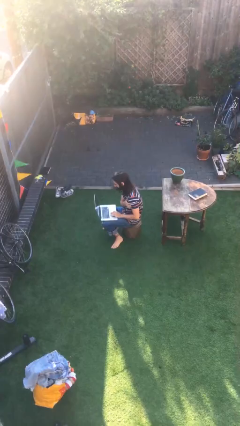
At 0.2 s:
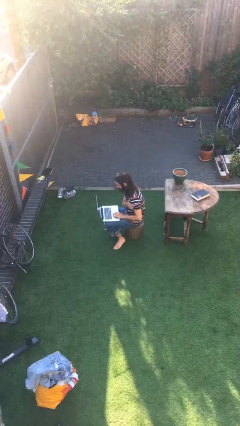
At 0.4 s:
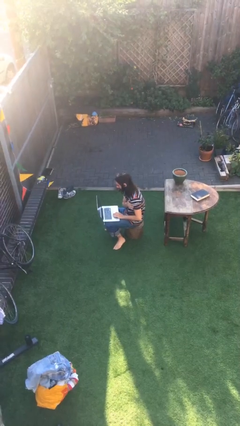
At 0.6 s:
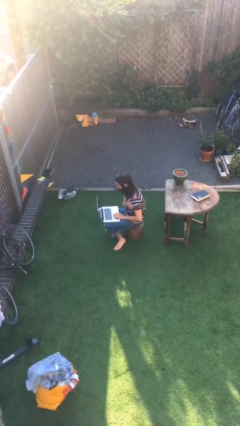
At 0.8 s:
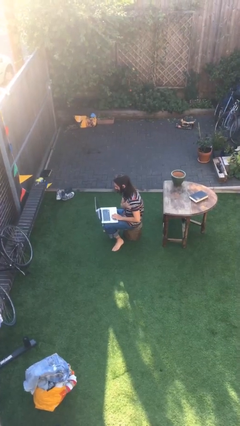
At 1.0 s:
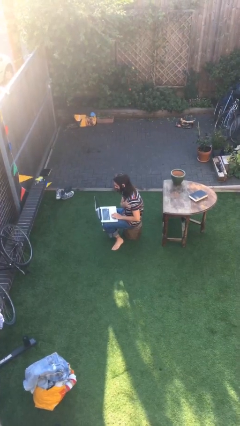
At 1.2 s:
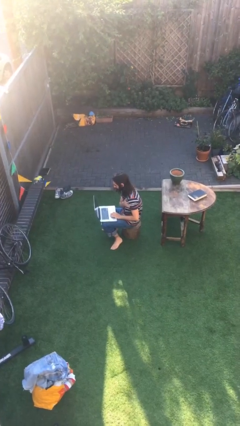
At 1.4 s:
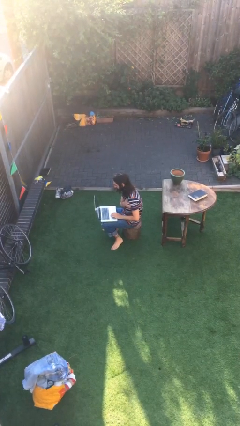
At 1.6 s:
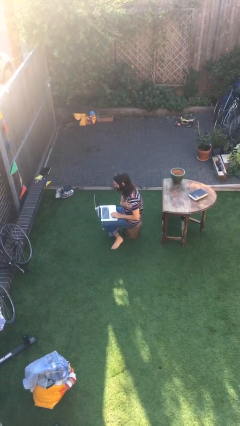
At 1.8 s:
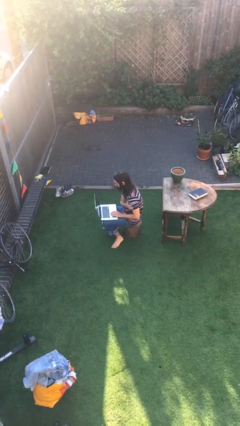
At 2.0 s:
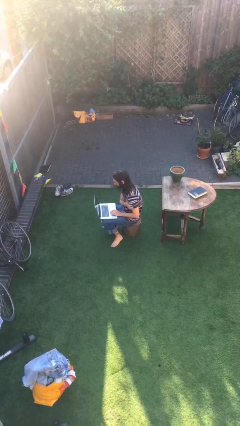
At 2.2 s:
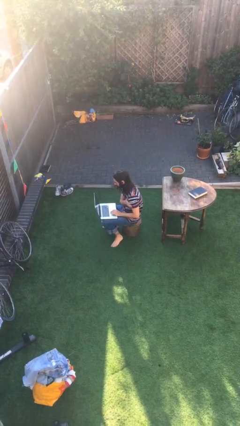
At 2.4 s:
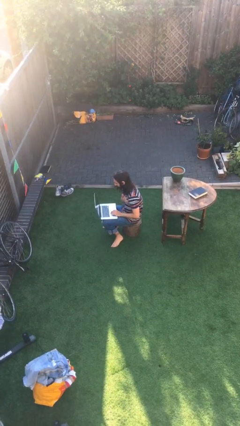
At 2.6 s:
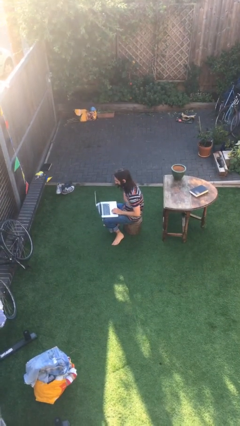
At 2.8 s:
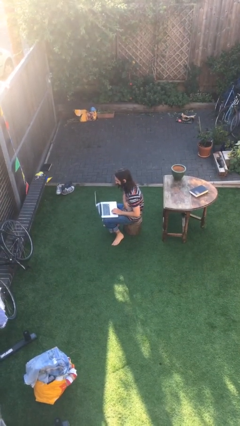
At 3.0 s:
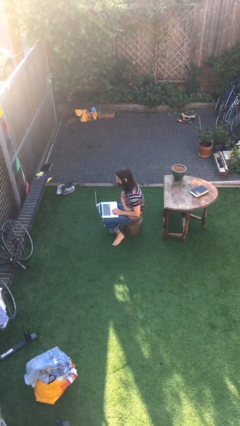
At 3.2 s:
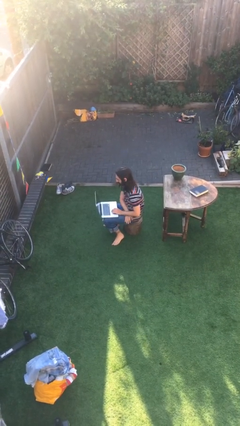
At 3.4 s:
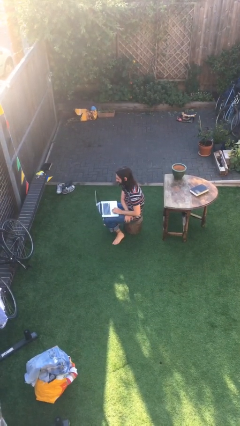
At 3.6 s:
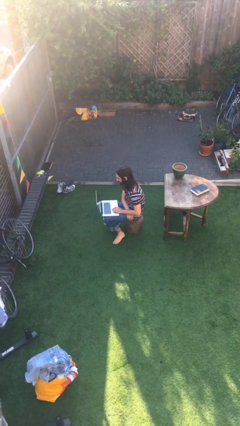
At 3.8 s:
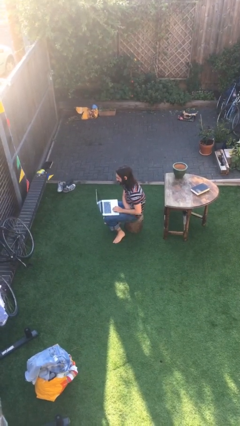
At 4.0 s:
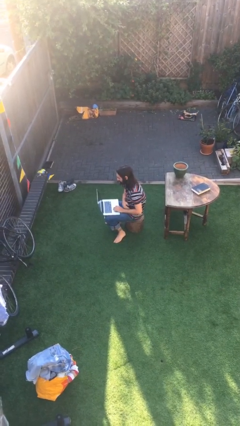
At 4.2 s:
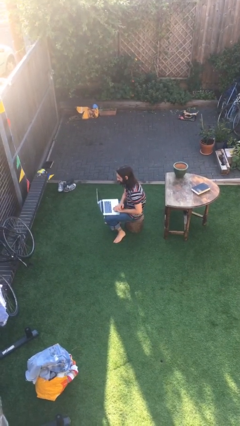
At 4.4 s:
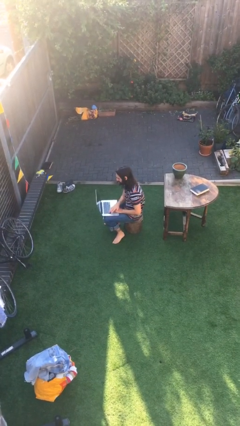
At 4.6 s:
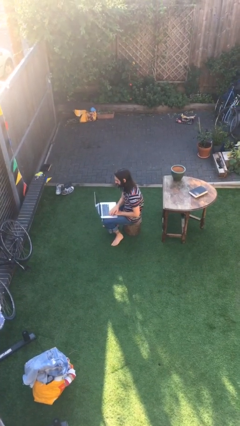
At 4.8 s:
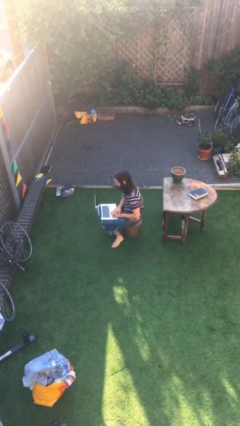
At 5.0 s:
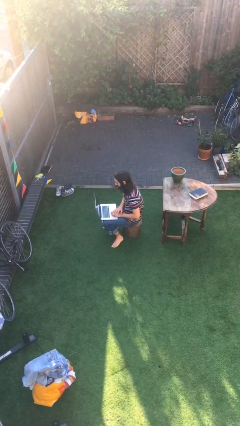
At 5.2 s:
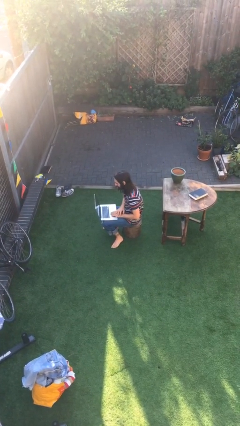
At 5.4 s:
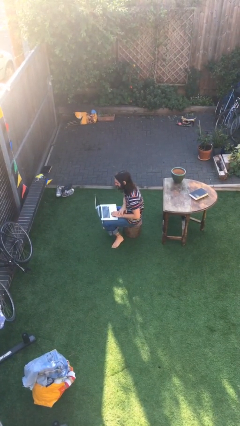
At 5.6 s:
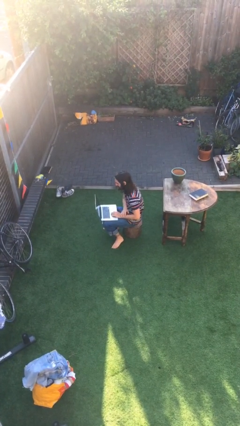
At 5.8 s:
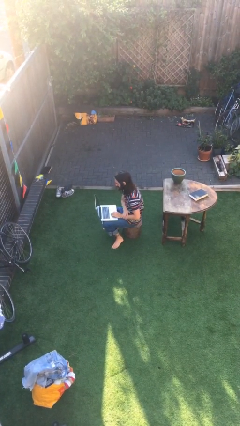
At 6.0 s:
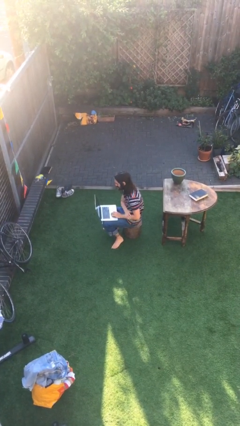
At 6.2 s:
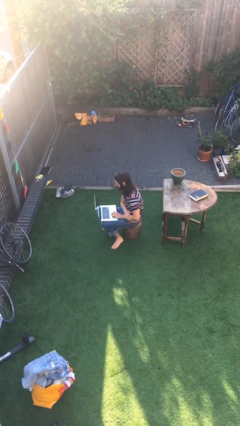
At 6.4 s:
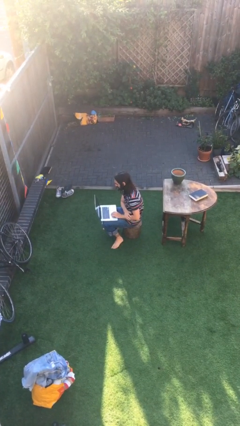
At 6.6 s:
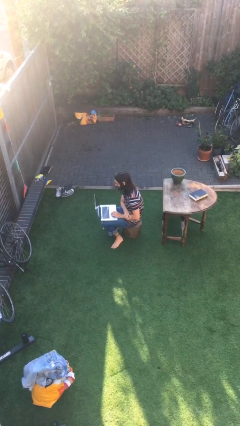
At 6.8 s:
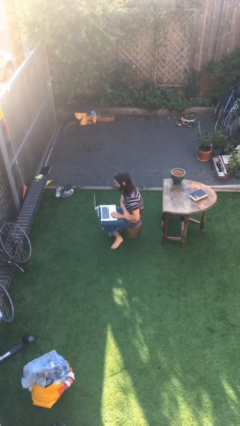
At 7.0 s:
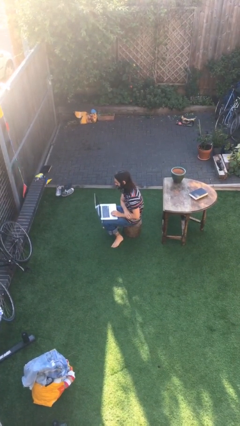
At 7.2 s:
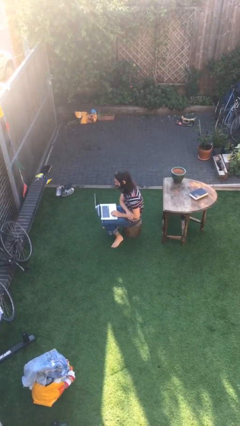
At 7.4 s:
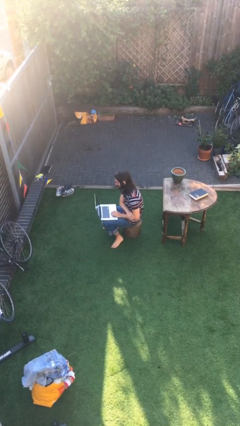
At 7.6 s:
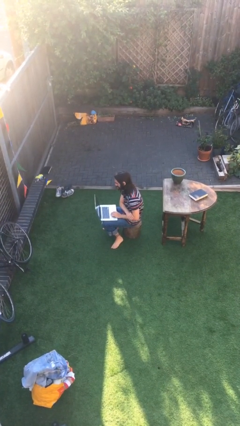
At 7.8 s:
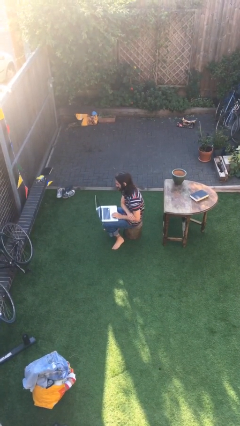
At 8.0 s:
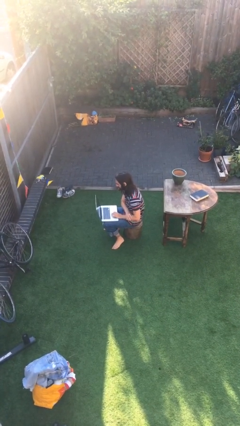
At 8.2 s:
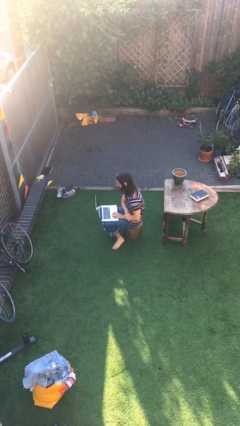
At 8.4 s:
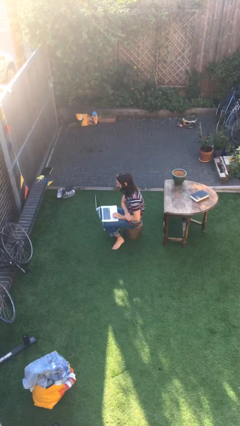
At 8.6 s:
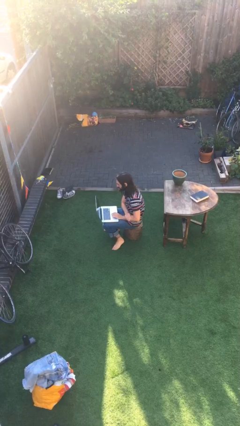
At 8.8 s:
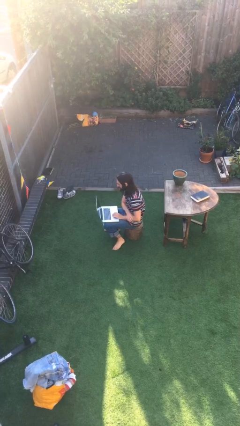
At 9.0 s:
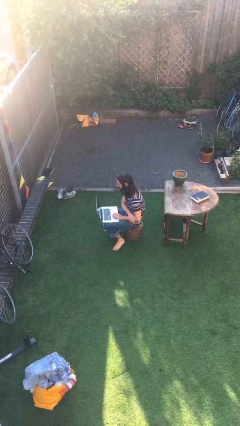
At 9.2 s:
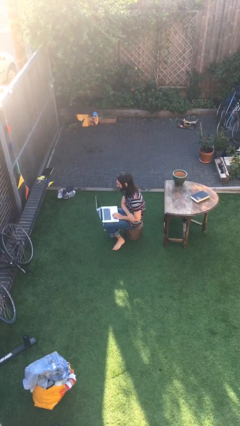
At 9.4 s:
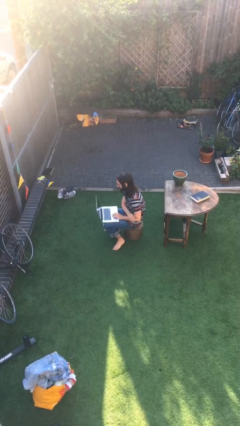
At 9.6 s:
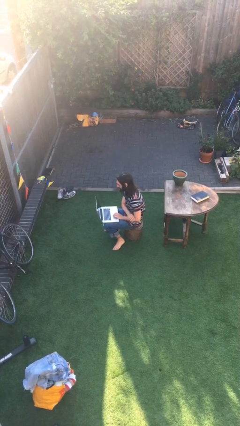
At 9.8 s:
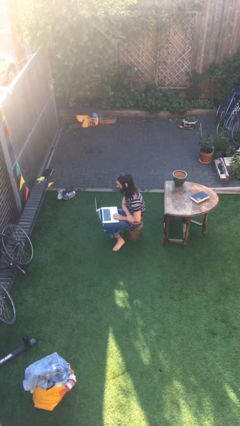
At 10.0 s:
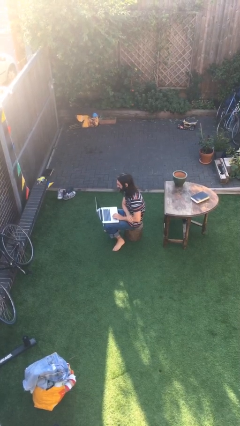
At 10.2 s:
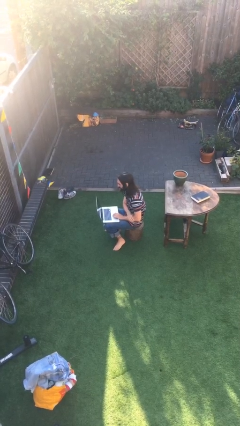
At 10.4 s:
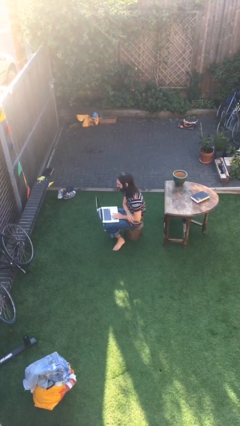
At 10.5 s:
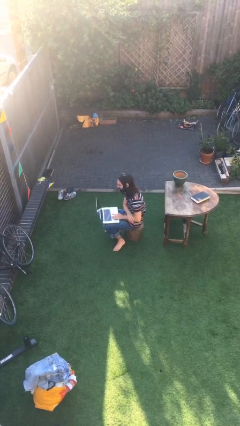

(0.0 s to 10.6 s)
person interacts with laptop

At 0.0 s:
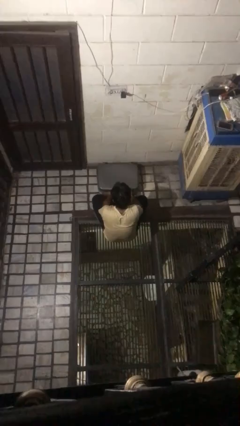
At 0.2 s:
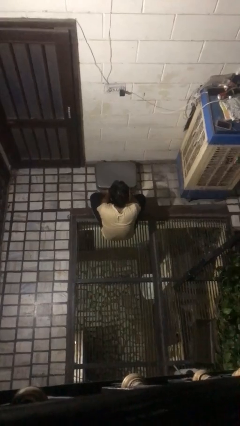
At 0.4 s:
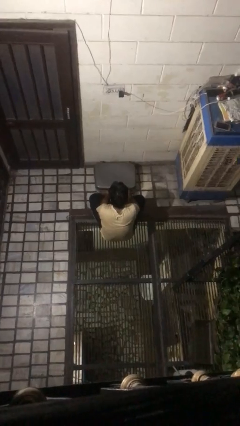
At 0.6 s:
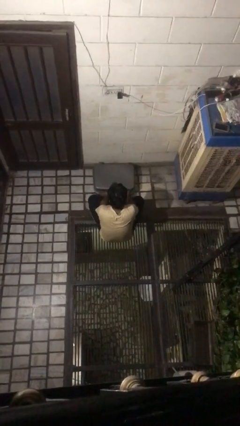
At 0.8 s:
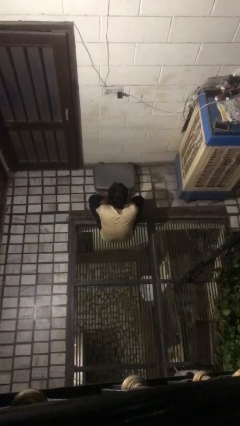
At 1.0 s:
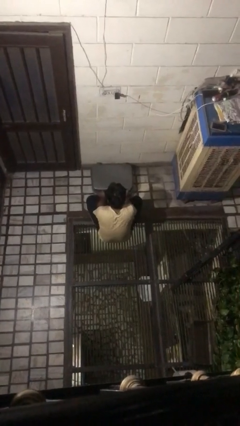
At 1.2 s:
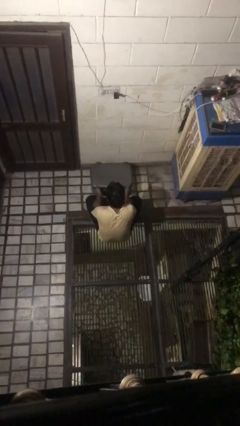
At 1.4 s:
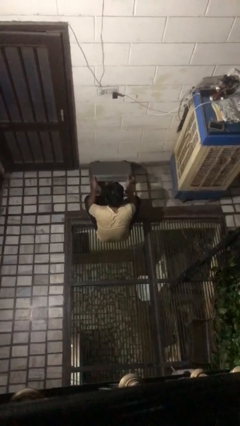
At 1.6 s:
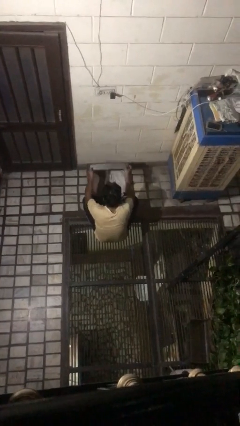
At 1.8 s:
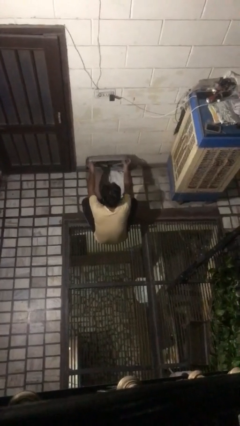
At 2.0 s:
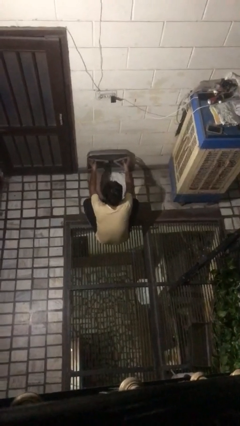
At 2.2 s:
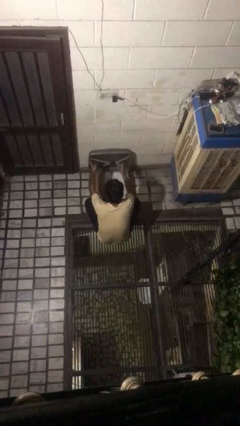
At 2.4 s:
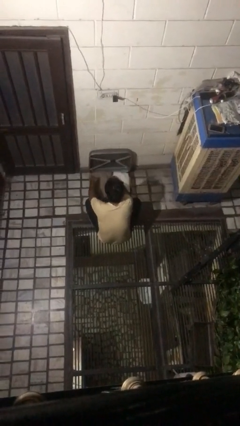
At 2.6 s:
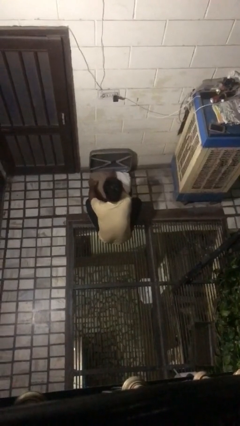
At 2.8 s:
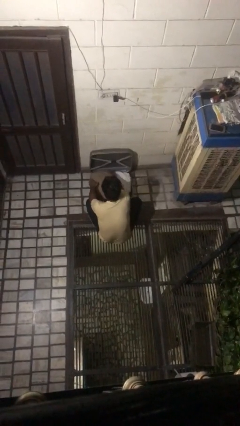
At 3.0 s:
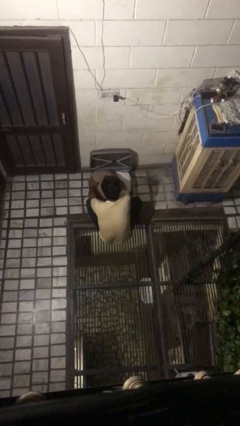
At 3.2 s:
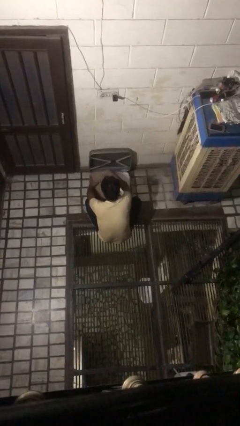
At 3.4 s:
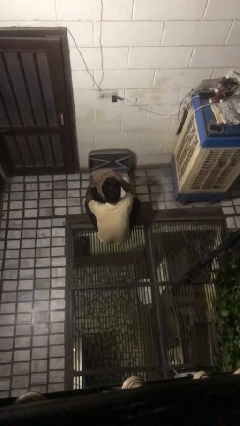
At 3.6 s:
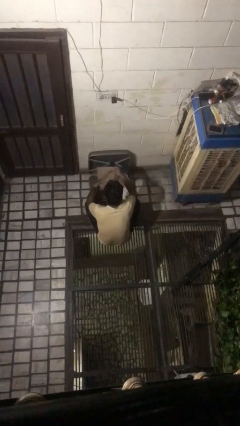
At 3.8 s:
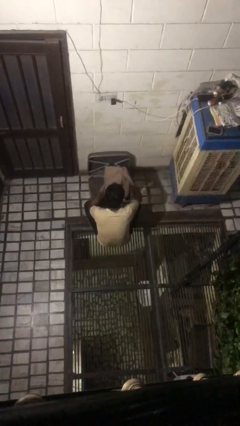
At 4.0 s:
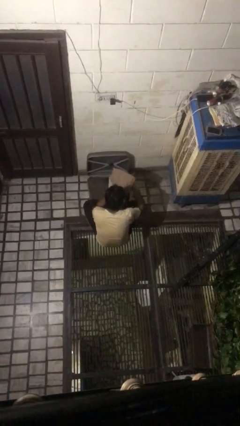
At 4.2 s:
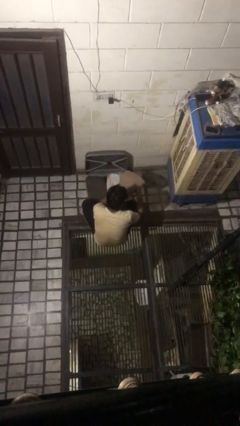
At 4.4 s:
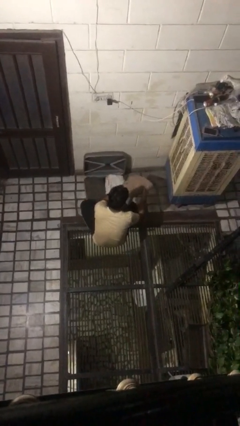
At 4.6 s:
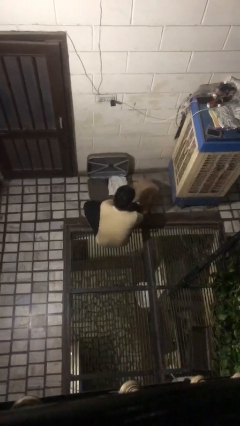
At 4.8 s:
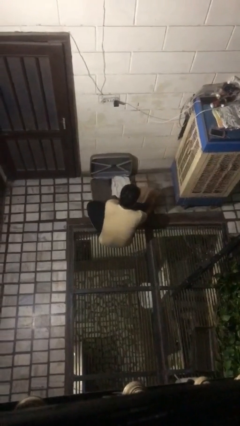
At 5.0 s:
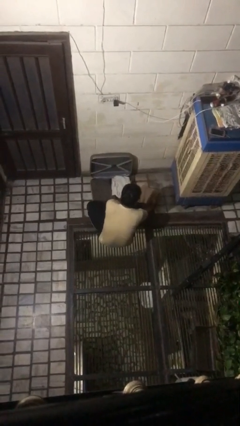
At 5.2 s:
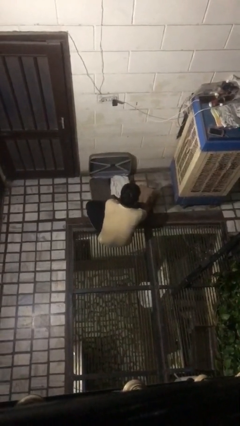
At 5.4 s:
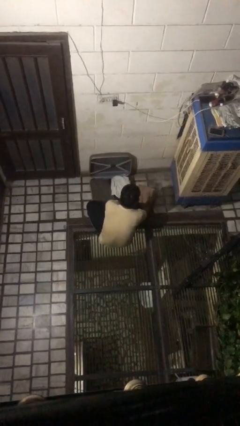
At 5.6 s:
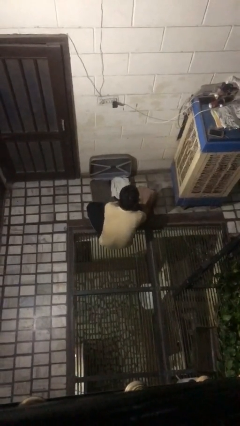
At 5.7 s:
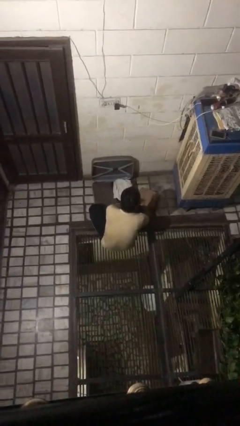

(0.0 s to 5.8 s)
person unloads clothes from suitcase

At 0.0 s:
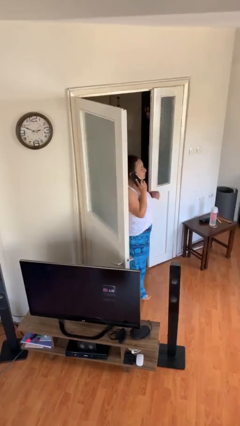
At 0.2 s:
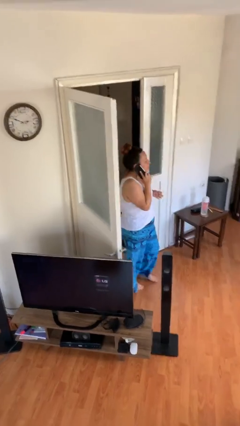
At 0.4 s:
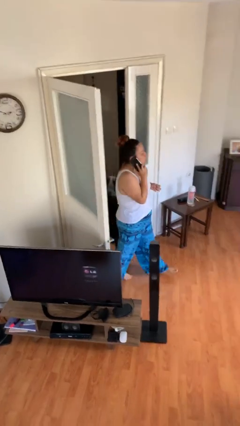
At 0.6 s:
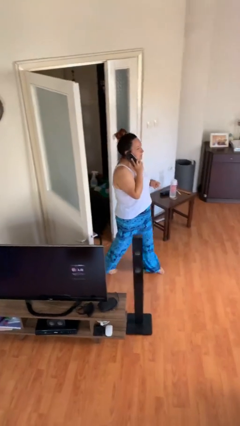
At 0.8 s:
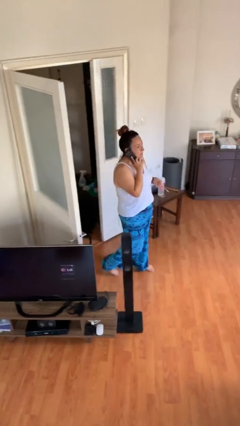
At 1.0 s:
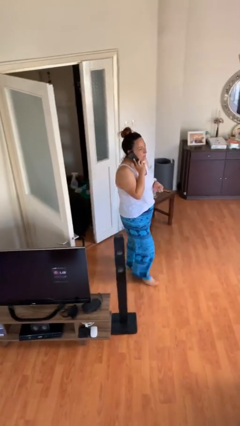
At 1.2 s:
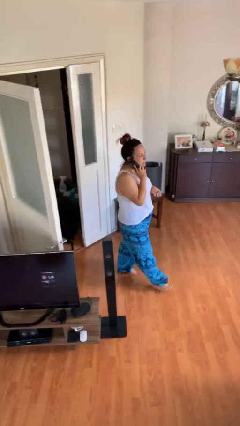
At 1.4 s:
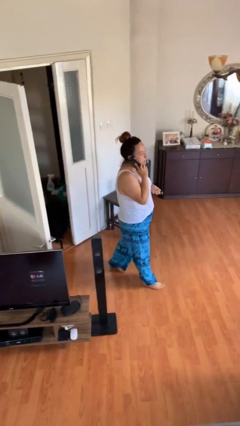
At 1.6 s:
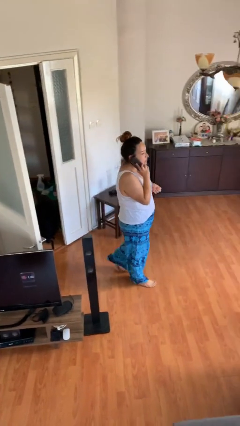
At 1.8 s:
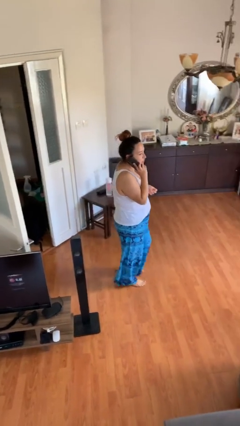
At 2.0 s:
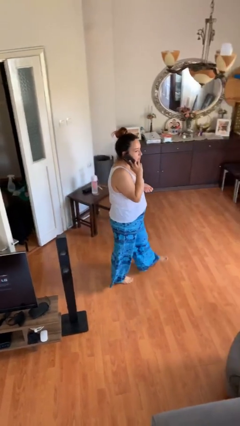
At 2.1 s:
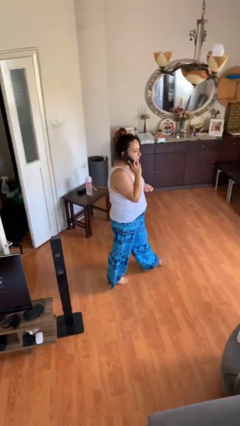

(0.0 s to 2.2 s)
person enters scene through structure
